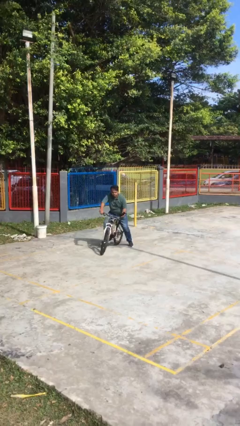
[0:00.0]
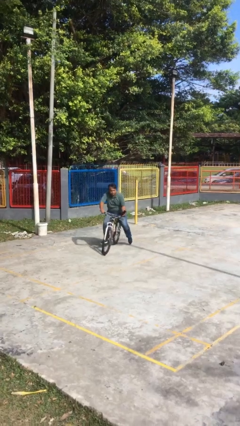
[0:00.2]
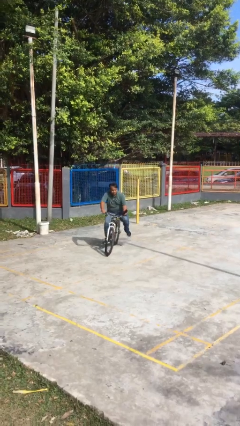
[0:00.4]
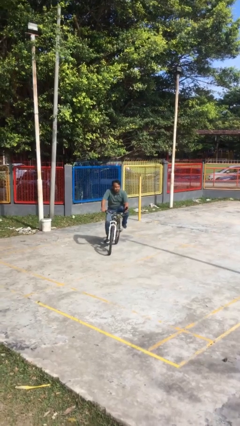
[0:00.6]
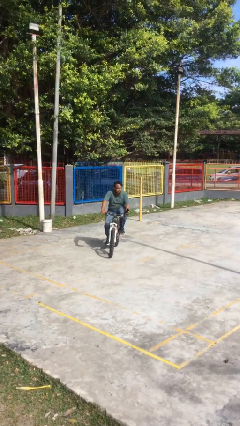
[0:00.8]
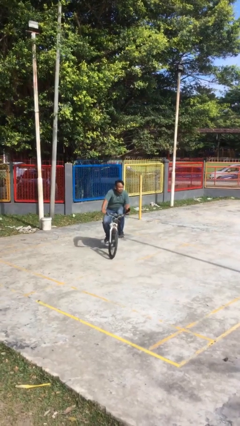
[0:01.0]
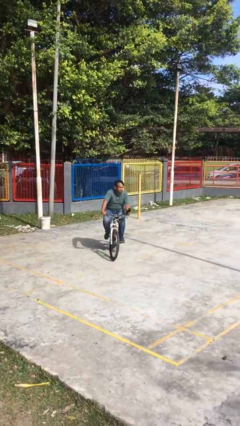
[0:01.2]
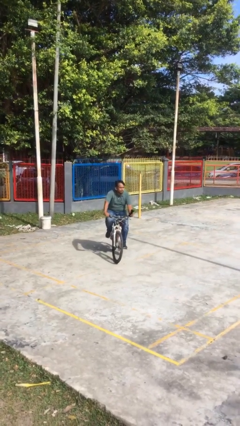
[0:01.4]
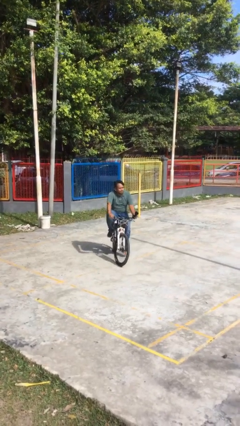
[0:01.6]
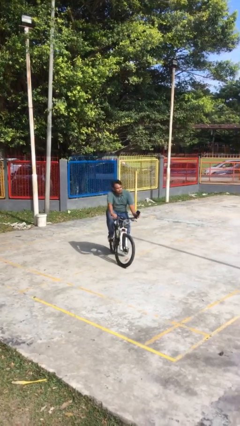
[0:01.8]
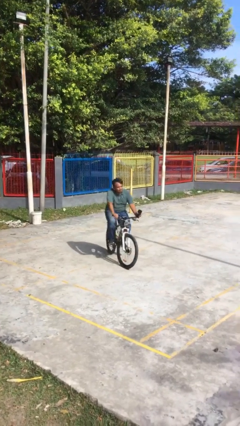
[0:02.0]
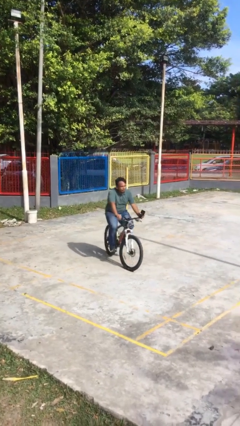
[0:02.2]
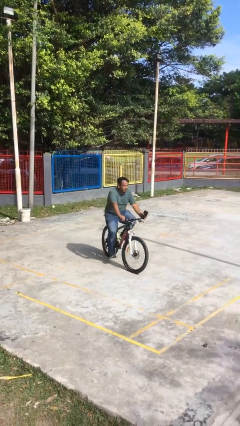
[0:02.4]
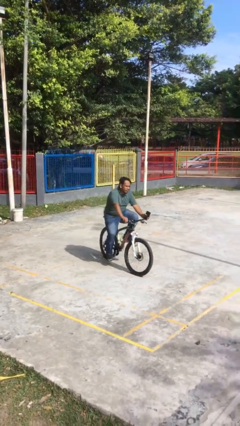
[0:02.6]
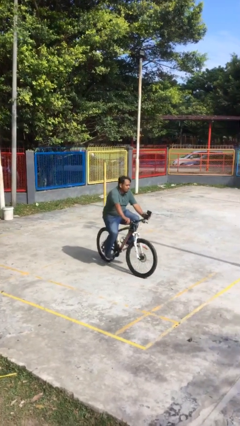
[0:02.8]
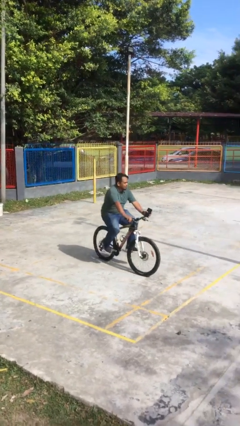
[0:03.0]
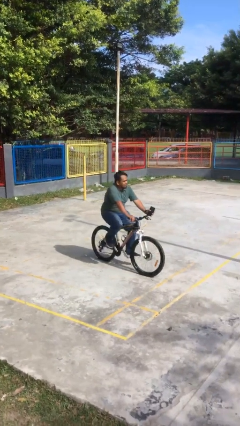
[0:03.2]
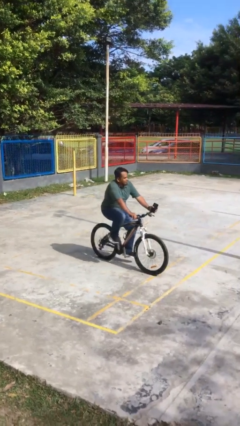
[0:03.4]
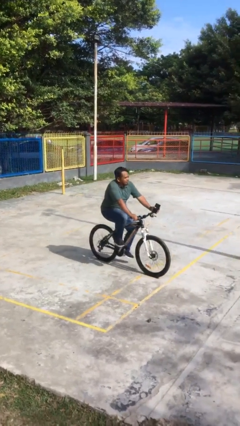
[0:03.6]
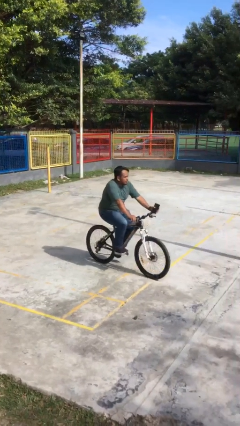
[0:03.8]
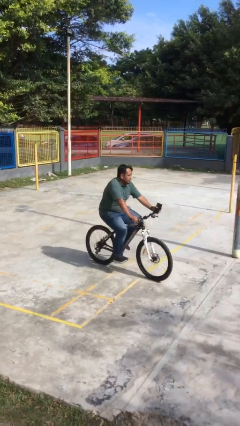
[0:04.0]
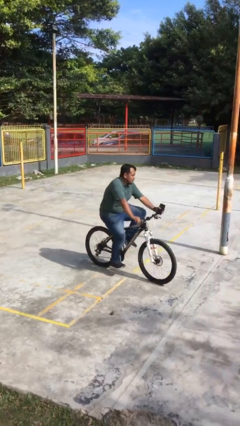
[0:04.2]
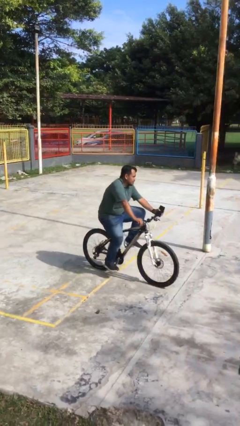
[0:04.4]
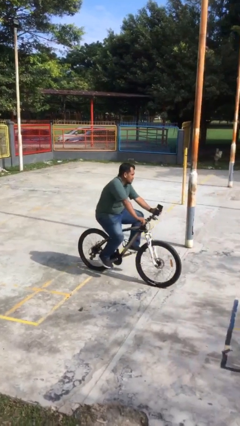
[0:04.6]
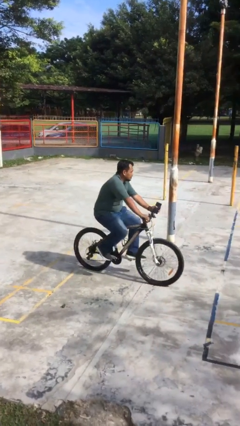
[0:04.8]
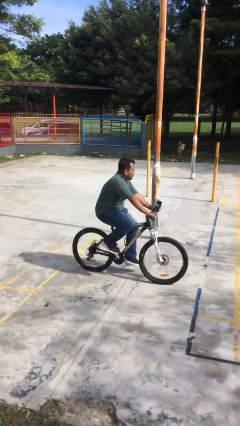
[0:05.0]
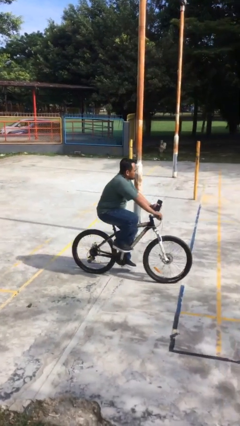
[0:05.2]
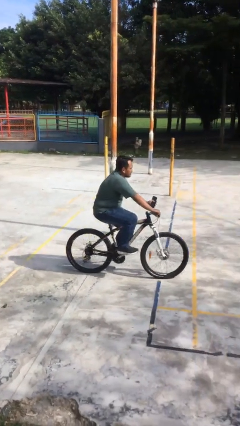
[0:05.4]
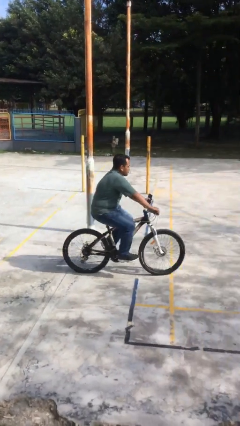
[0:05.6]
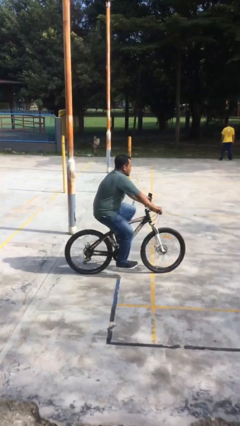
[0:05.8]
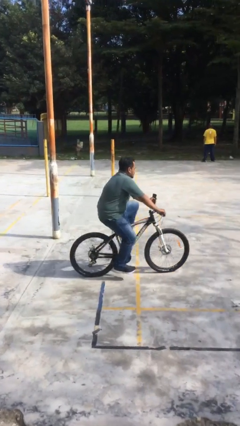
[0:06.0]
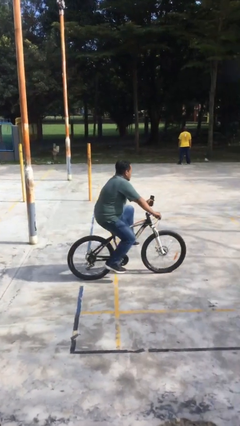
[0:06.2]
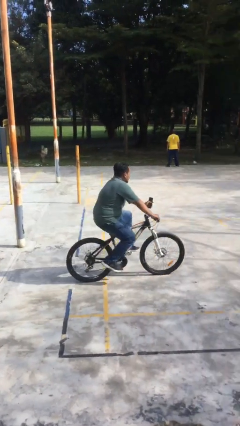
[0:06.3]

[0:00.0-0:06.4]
person rides bicycle

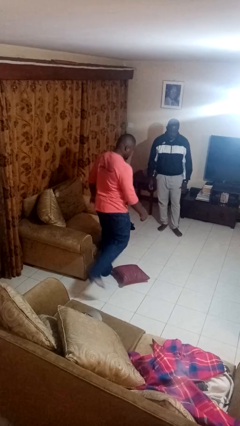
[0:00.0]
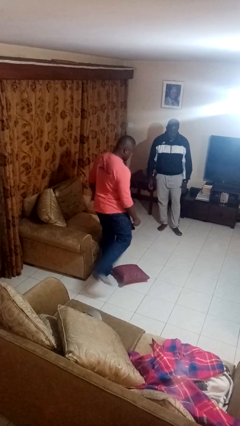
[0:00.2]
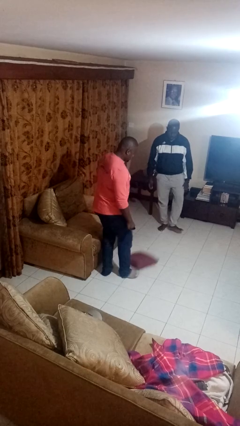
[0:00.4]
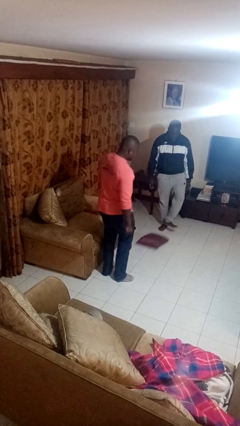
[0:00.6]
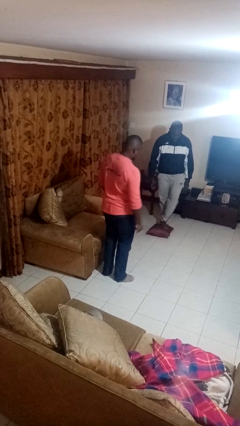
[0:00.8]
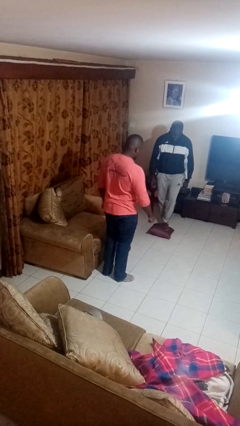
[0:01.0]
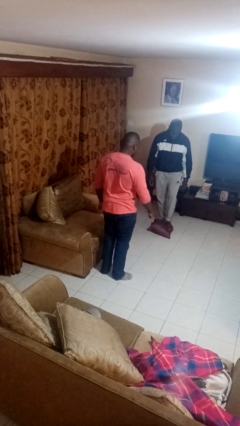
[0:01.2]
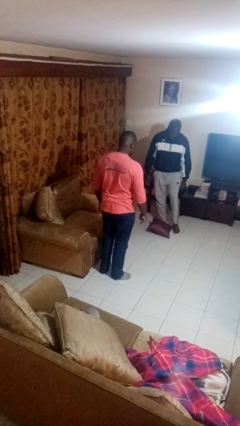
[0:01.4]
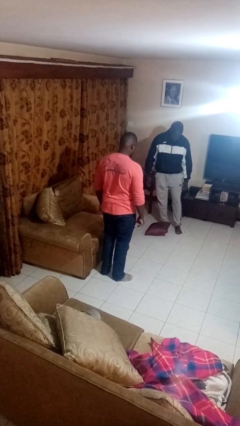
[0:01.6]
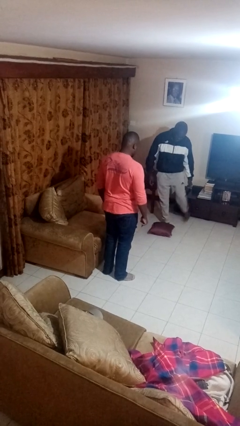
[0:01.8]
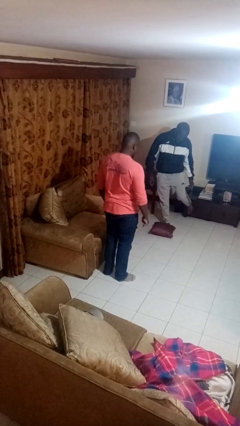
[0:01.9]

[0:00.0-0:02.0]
person kicks object to person

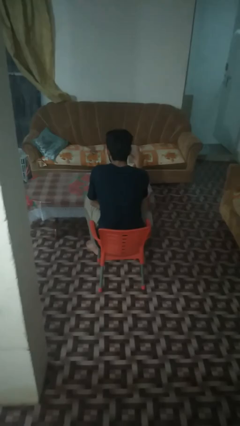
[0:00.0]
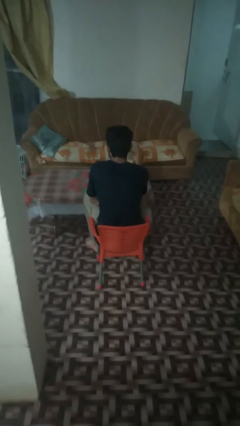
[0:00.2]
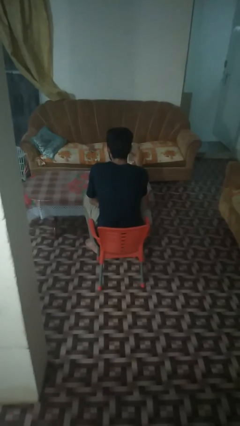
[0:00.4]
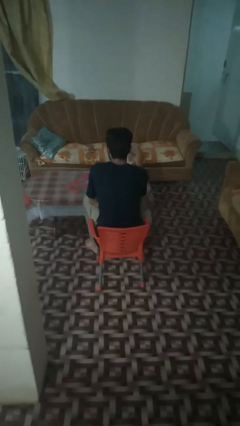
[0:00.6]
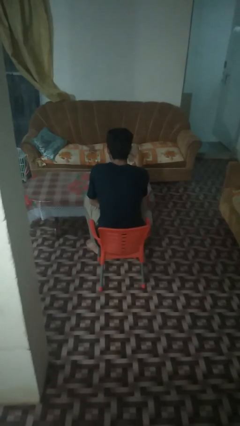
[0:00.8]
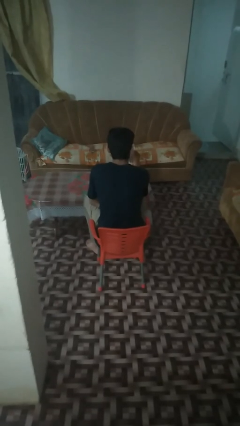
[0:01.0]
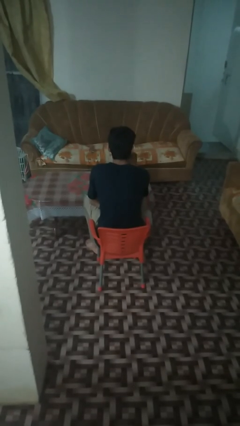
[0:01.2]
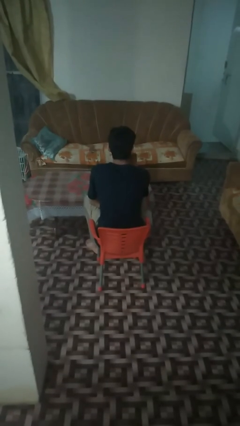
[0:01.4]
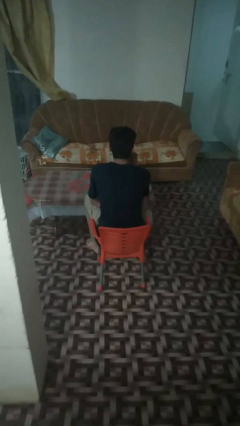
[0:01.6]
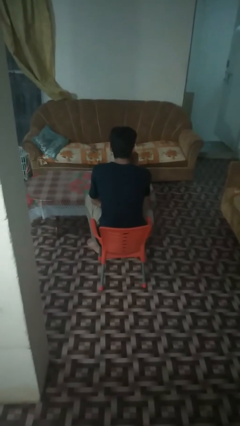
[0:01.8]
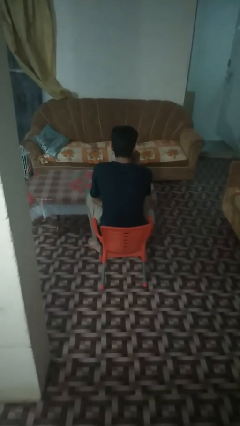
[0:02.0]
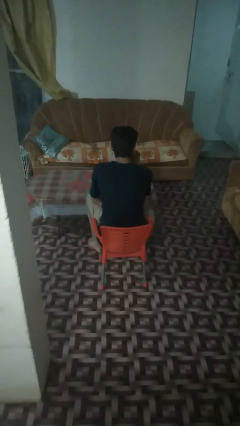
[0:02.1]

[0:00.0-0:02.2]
person drinks from shotglass

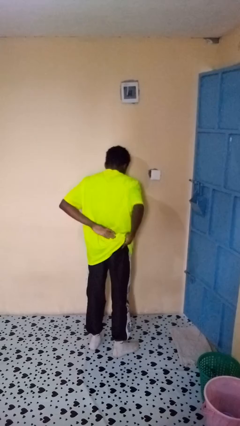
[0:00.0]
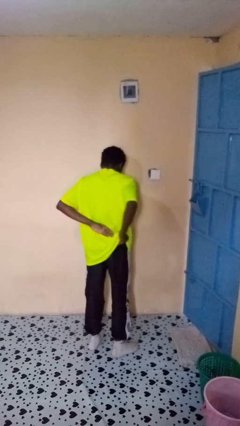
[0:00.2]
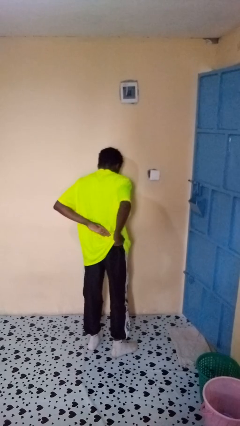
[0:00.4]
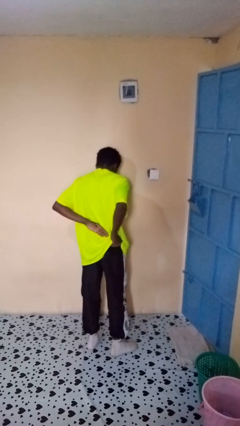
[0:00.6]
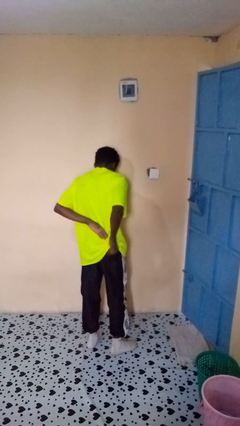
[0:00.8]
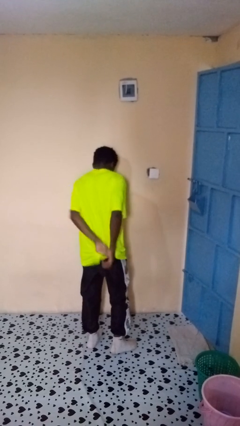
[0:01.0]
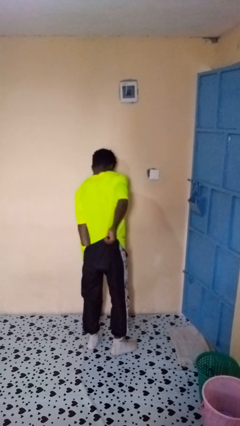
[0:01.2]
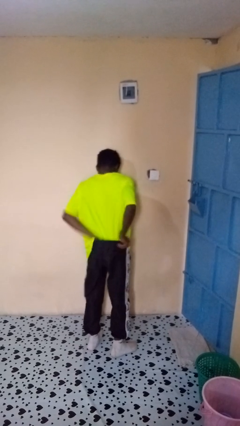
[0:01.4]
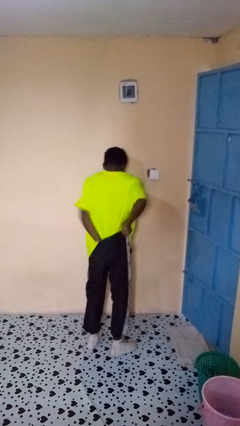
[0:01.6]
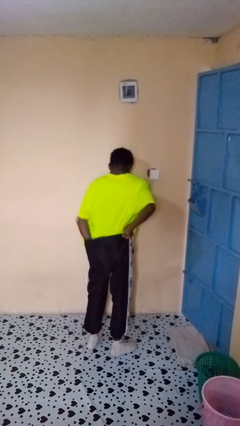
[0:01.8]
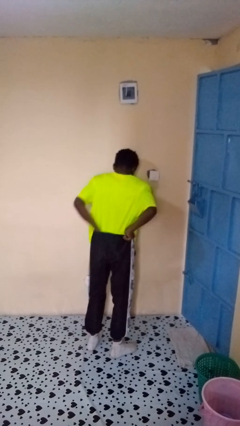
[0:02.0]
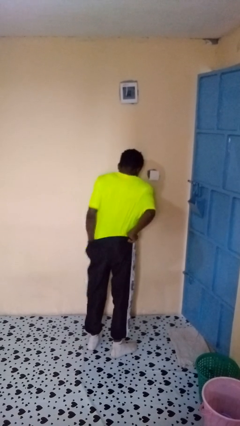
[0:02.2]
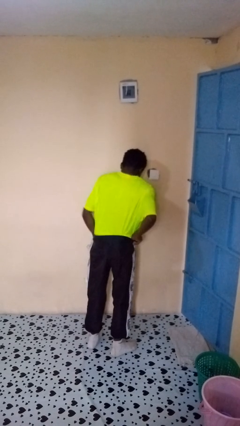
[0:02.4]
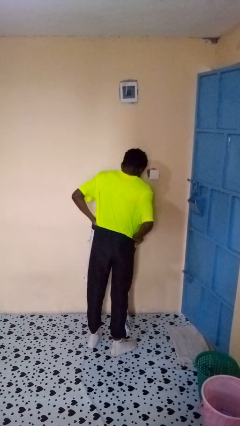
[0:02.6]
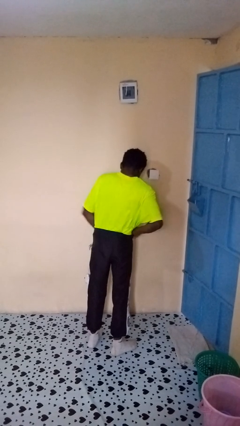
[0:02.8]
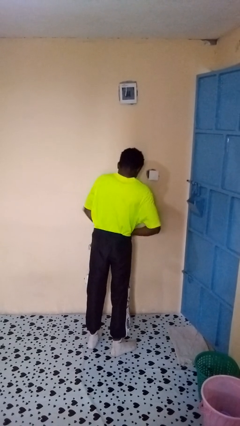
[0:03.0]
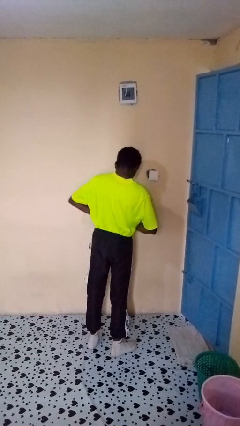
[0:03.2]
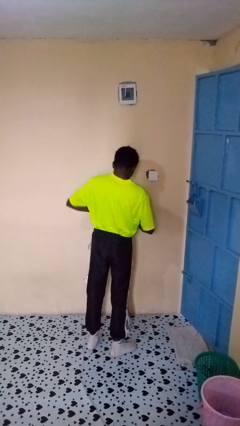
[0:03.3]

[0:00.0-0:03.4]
person tucks in shirt

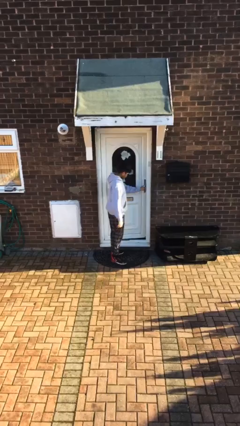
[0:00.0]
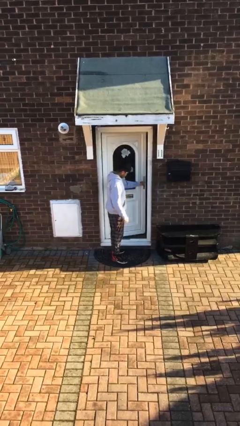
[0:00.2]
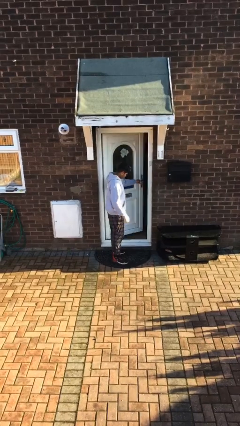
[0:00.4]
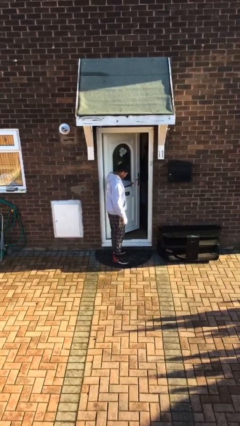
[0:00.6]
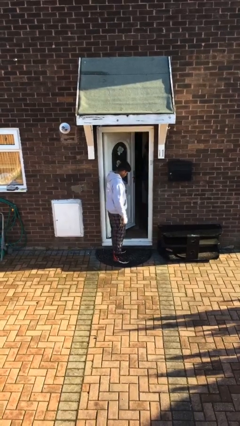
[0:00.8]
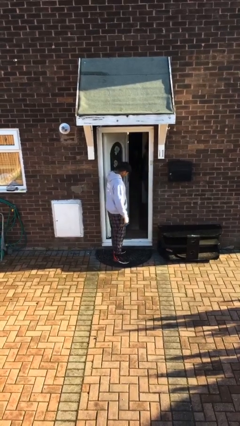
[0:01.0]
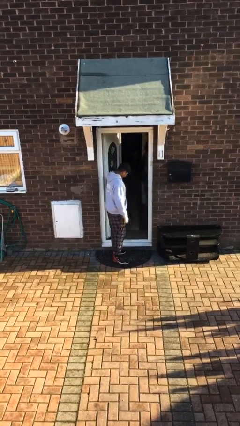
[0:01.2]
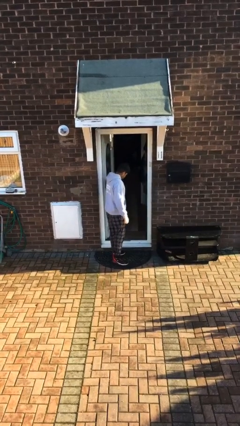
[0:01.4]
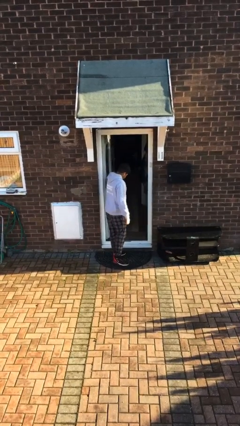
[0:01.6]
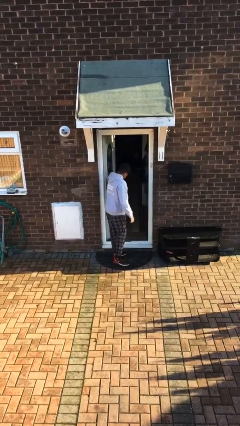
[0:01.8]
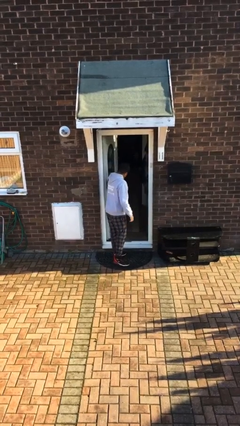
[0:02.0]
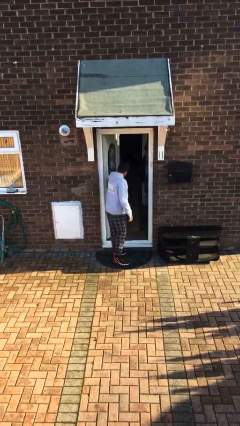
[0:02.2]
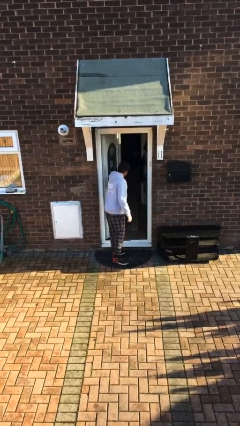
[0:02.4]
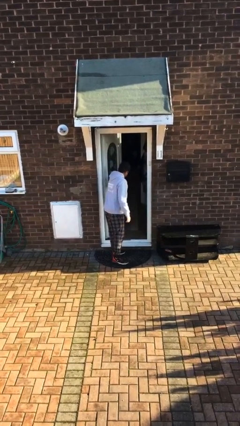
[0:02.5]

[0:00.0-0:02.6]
person opens facility door

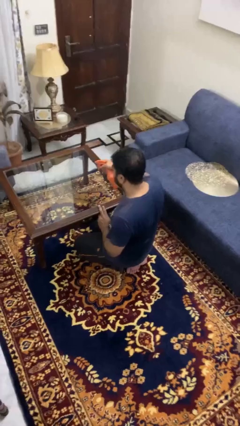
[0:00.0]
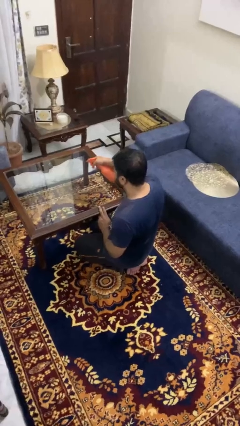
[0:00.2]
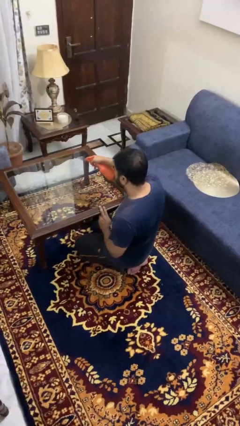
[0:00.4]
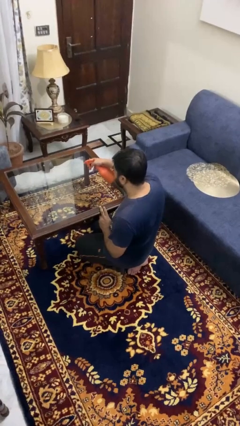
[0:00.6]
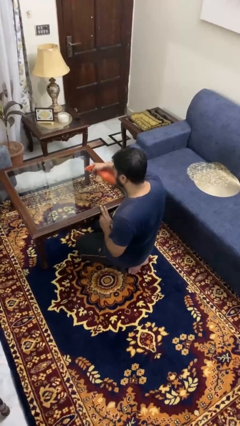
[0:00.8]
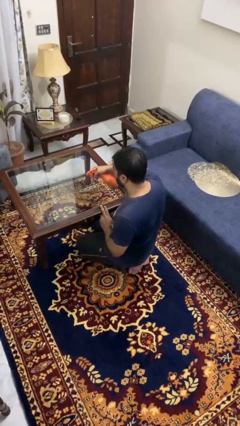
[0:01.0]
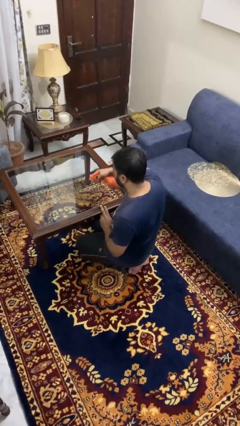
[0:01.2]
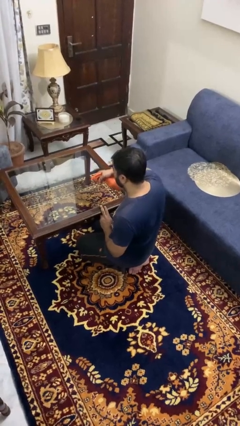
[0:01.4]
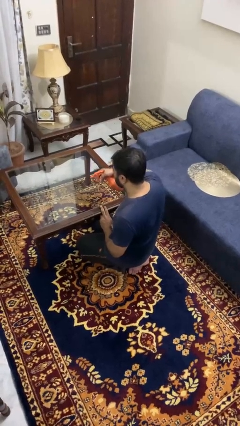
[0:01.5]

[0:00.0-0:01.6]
person sprays from bottle
